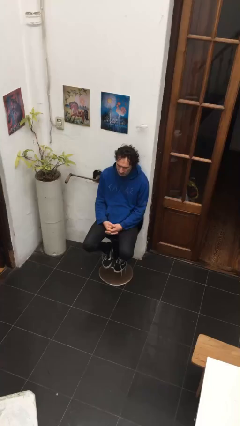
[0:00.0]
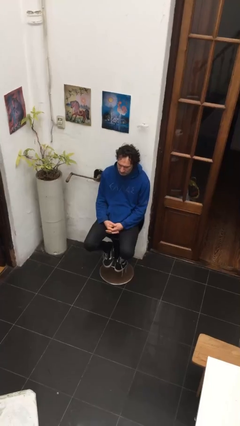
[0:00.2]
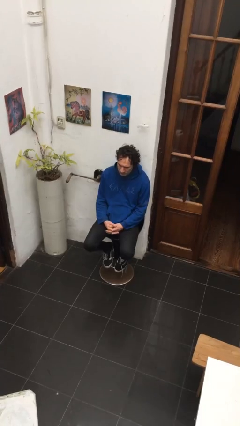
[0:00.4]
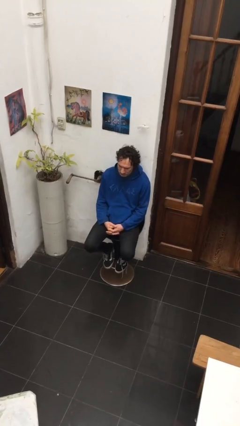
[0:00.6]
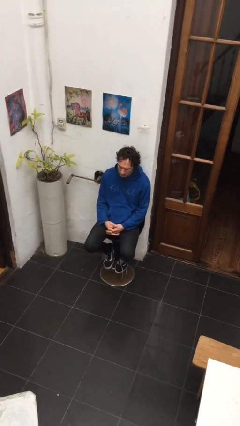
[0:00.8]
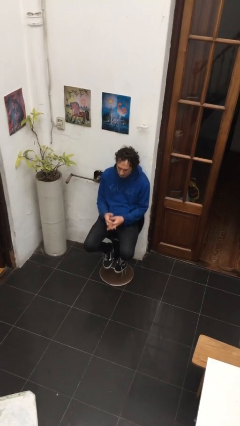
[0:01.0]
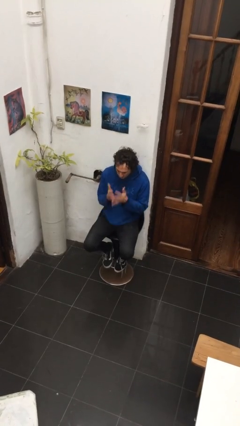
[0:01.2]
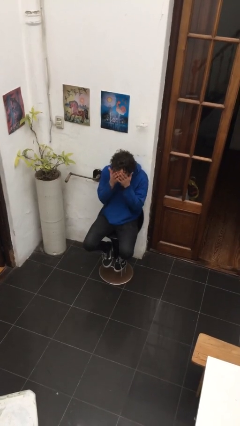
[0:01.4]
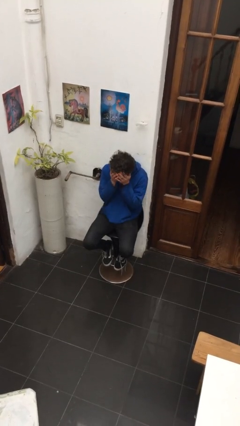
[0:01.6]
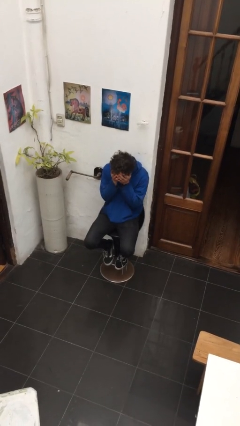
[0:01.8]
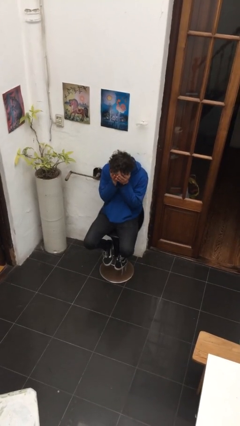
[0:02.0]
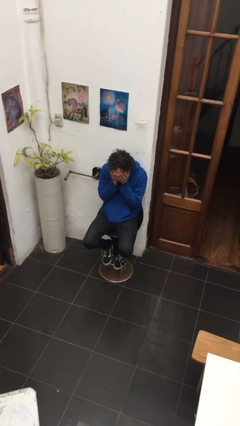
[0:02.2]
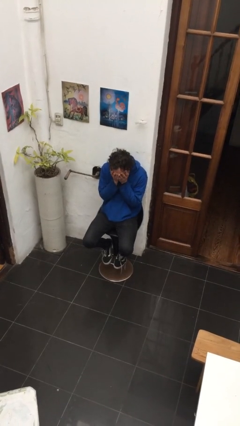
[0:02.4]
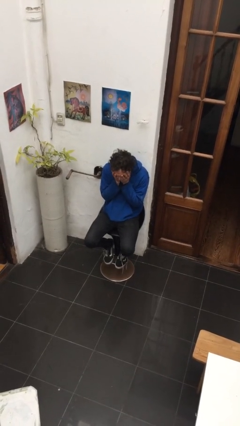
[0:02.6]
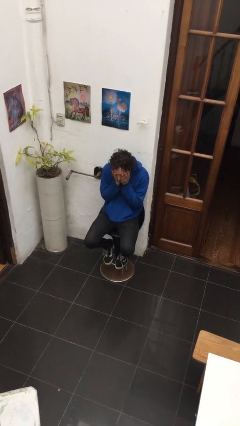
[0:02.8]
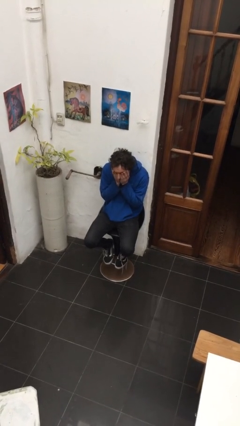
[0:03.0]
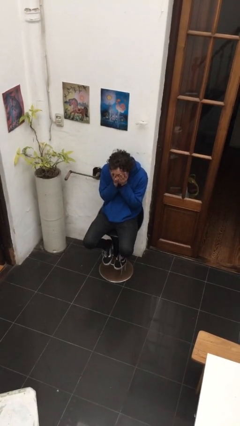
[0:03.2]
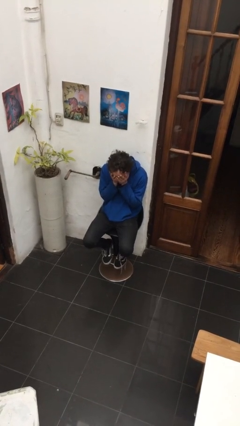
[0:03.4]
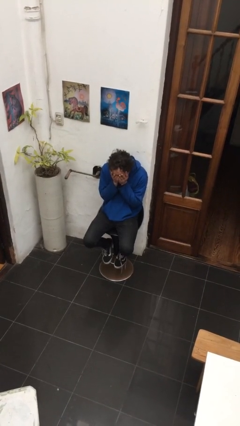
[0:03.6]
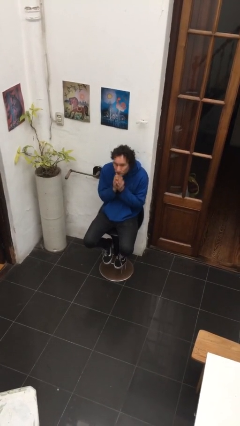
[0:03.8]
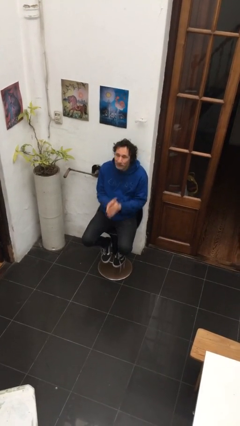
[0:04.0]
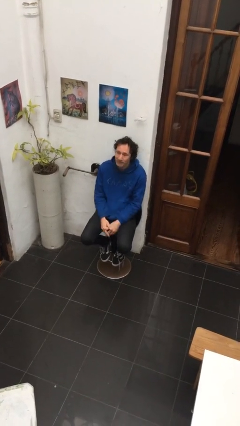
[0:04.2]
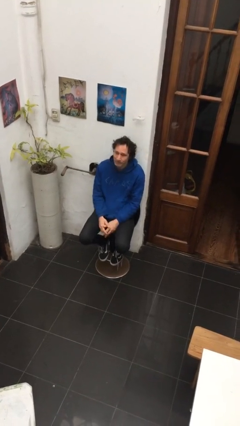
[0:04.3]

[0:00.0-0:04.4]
person covers face with hands

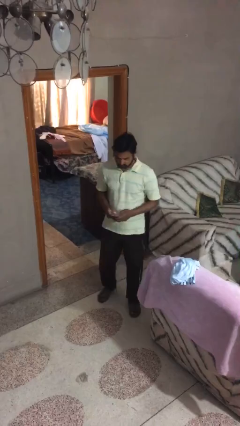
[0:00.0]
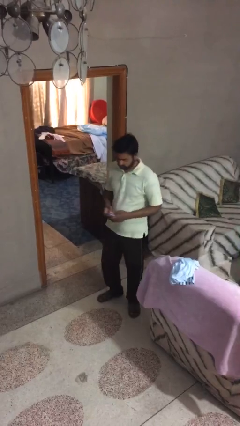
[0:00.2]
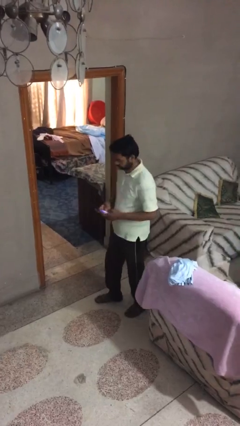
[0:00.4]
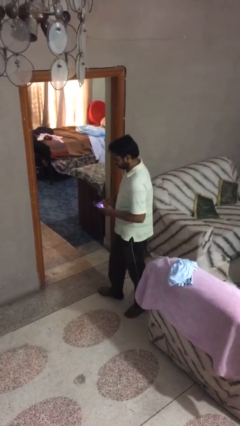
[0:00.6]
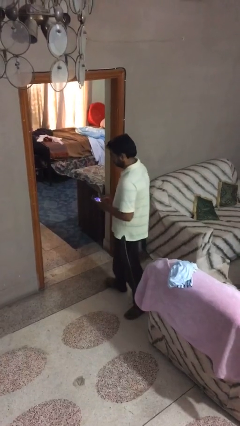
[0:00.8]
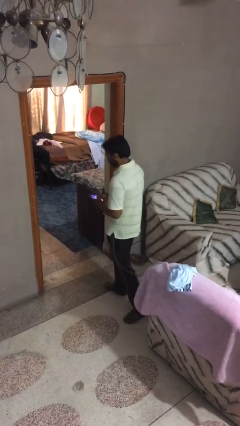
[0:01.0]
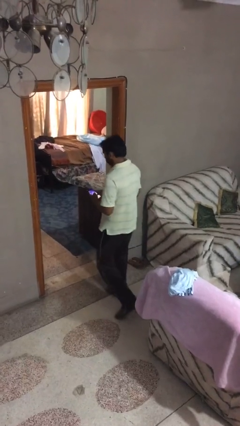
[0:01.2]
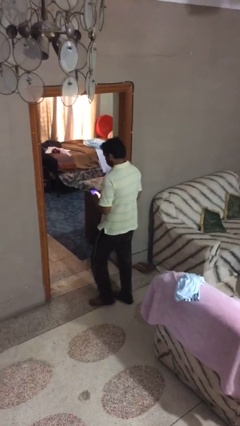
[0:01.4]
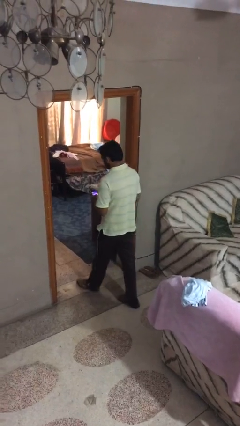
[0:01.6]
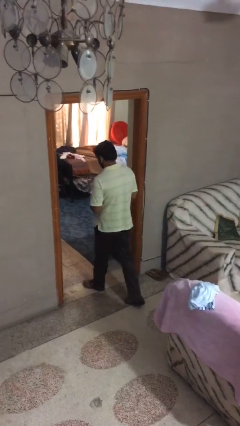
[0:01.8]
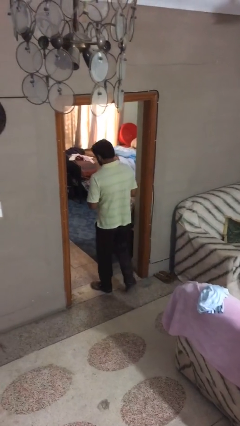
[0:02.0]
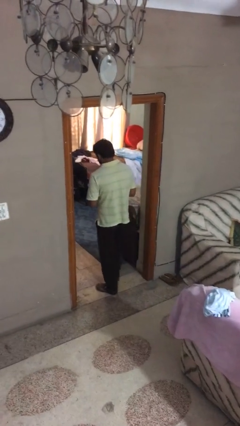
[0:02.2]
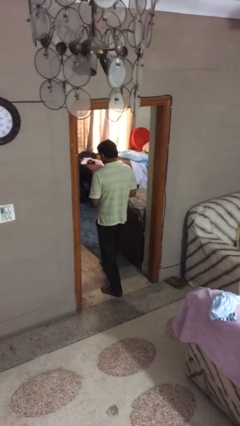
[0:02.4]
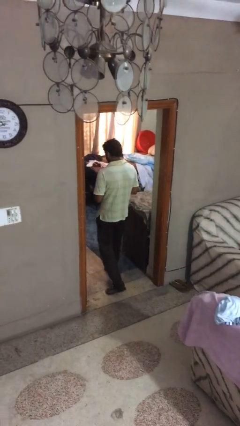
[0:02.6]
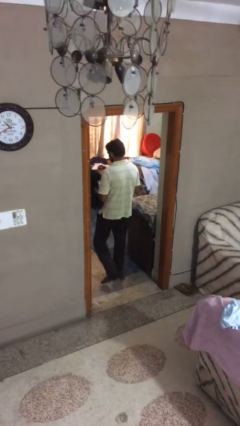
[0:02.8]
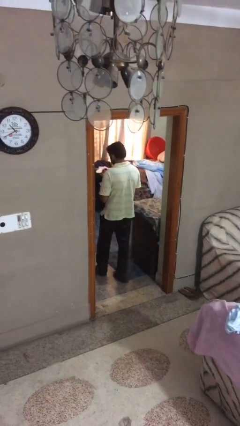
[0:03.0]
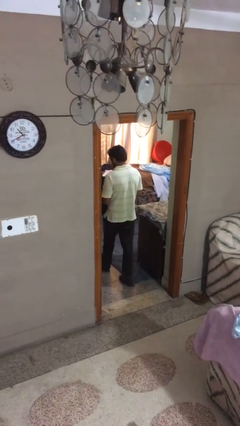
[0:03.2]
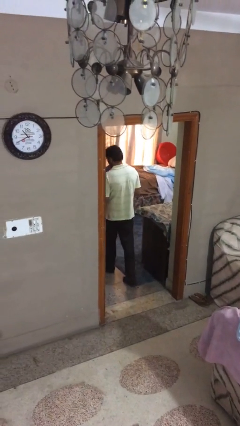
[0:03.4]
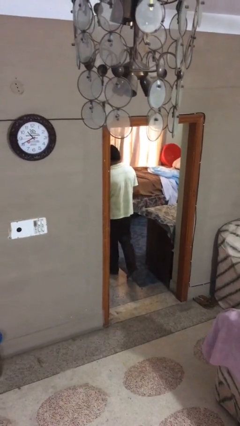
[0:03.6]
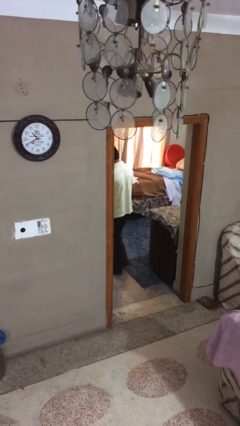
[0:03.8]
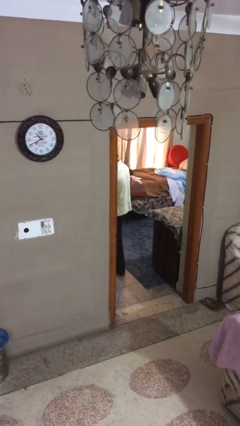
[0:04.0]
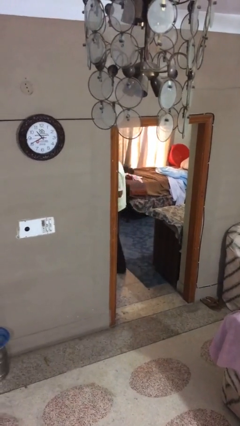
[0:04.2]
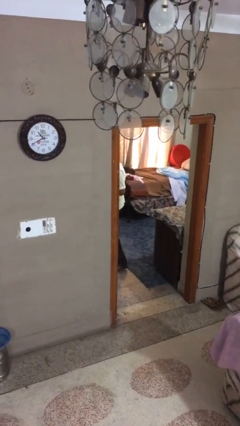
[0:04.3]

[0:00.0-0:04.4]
person exits scene through structure

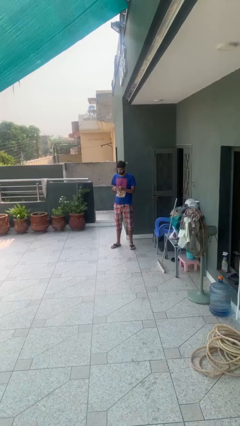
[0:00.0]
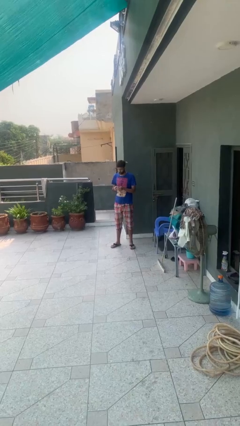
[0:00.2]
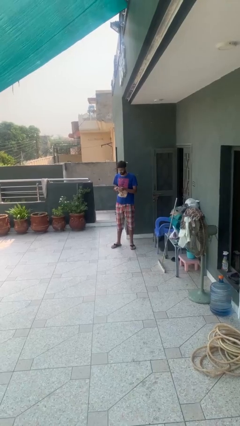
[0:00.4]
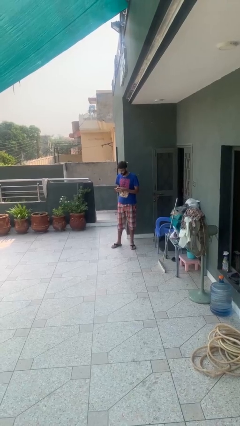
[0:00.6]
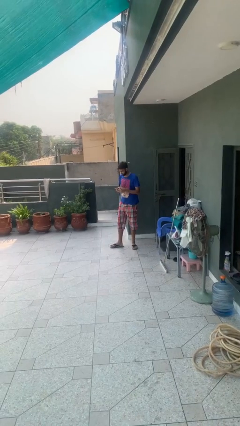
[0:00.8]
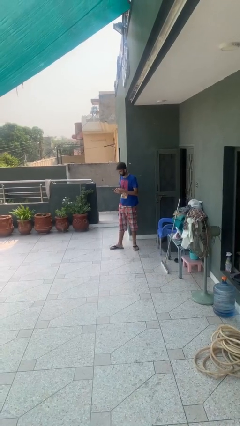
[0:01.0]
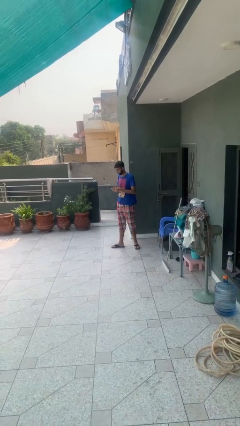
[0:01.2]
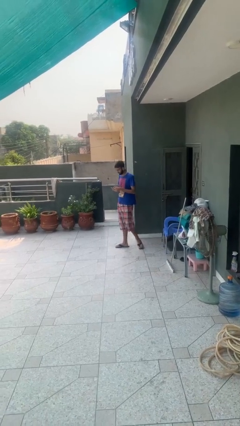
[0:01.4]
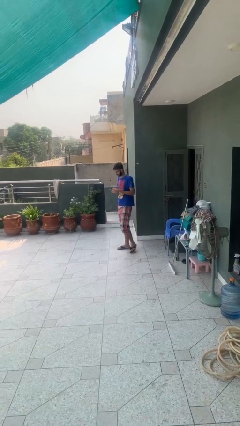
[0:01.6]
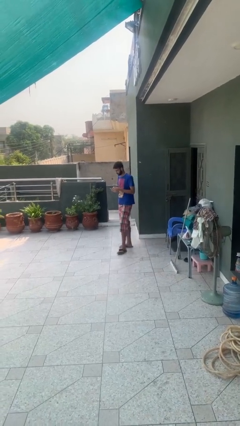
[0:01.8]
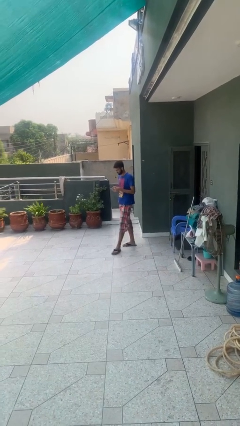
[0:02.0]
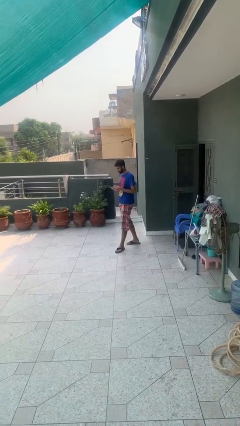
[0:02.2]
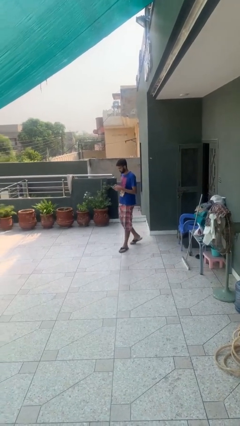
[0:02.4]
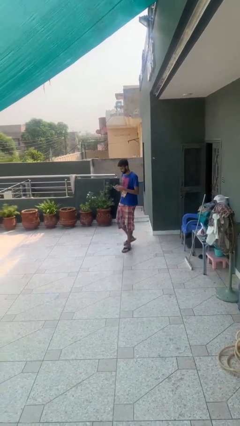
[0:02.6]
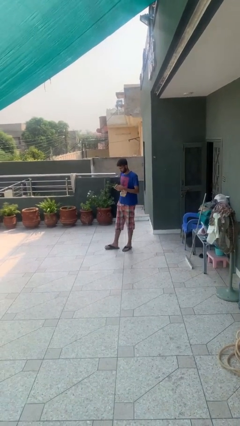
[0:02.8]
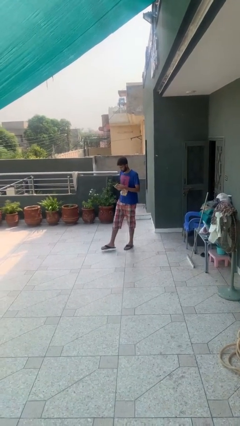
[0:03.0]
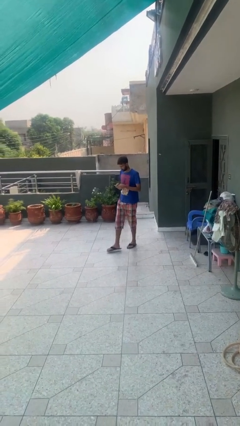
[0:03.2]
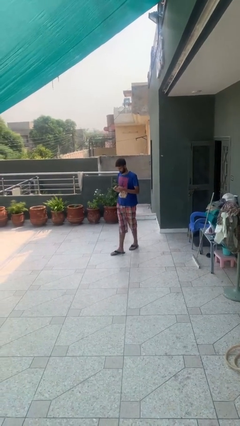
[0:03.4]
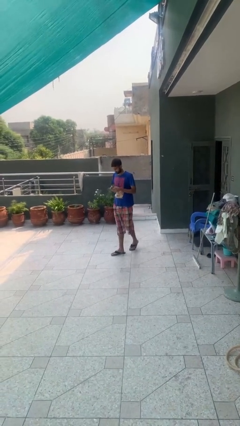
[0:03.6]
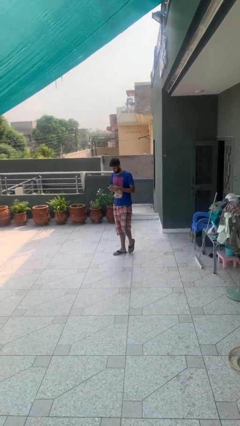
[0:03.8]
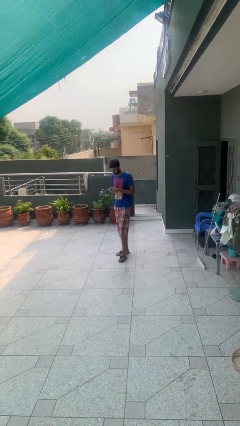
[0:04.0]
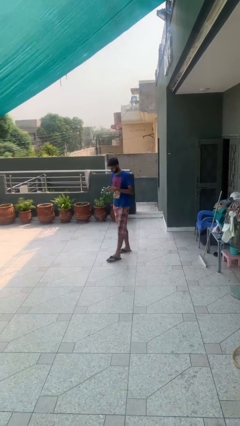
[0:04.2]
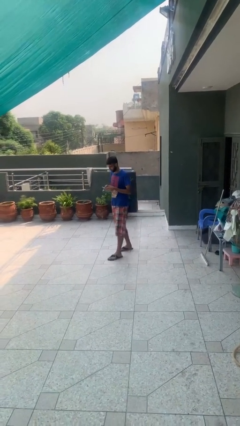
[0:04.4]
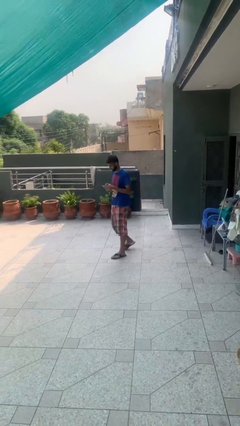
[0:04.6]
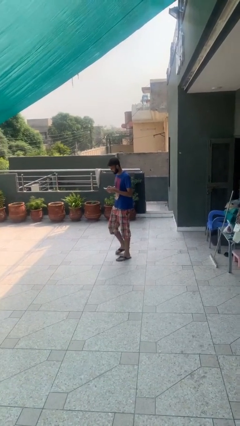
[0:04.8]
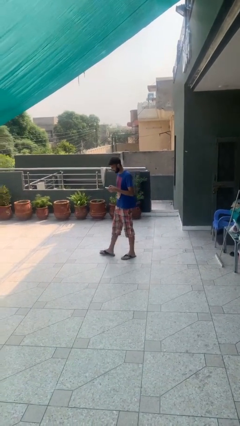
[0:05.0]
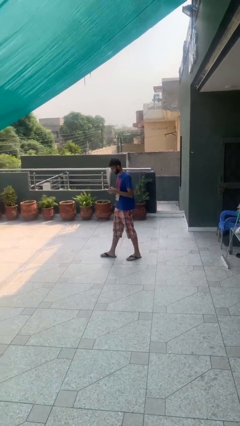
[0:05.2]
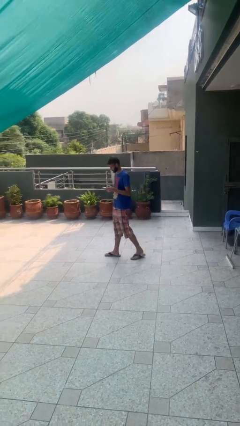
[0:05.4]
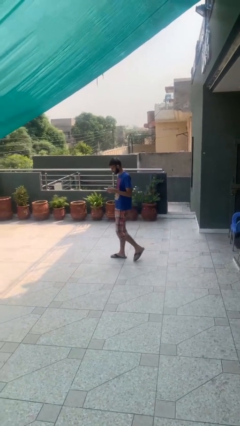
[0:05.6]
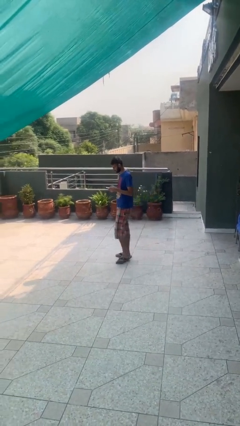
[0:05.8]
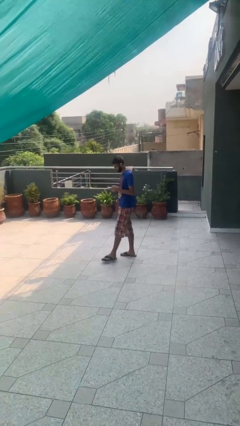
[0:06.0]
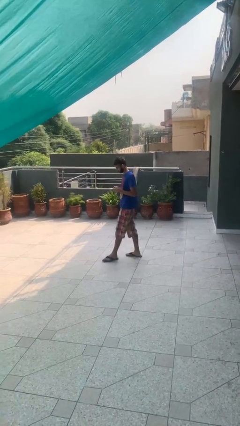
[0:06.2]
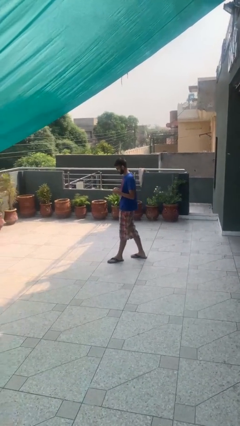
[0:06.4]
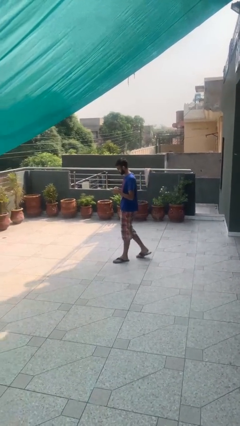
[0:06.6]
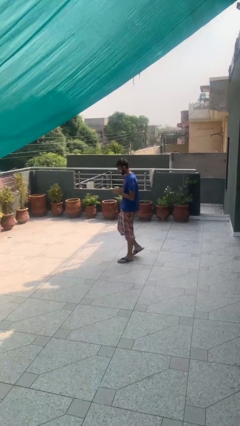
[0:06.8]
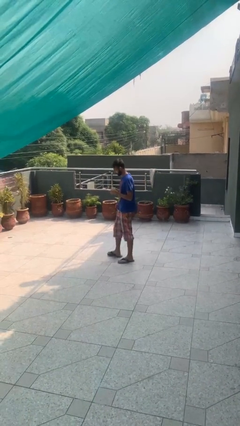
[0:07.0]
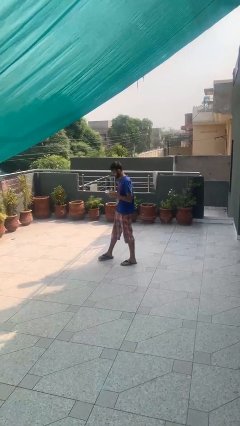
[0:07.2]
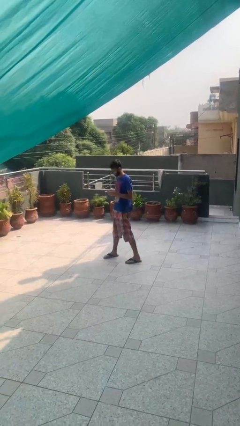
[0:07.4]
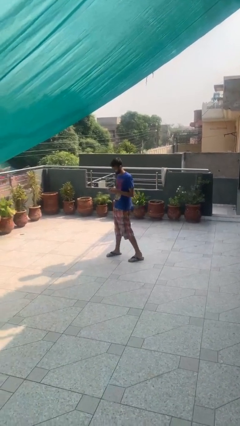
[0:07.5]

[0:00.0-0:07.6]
person texts on phone

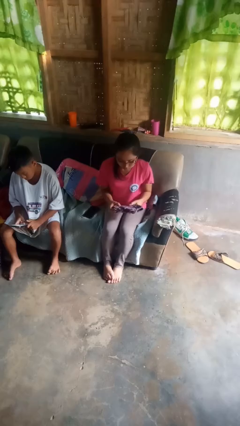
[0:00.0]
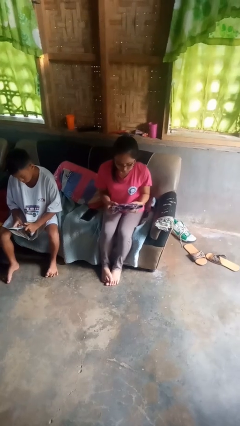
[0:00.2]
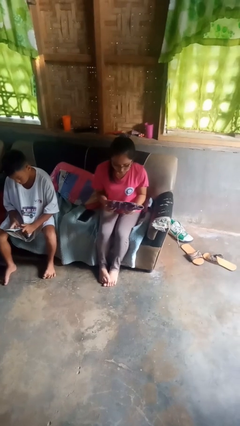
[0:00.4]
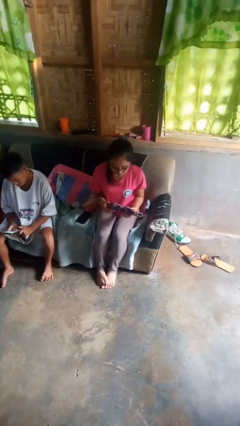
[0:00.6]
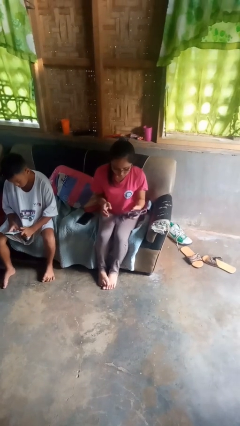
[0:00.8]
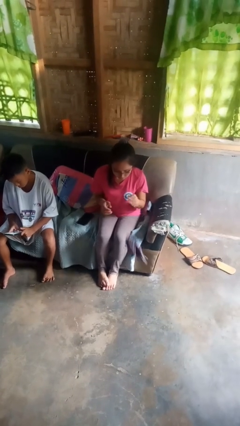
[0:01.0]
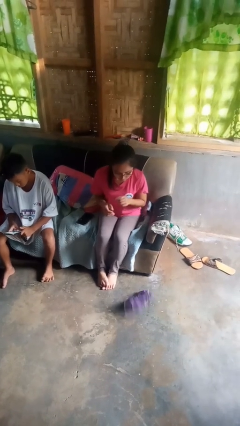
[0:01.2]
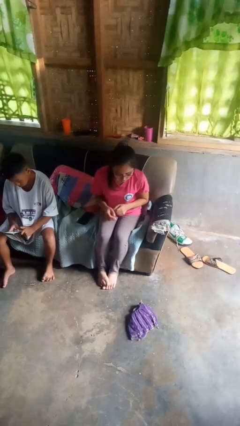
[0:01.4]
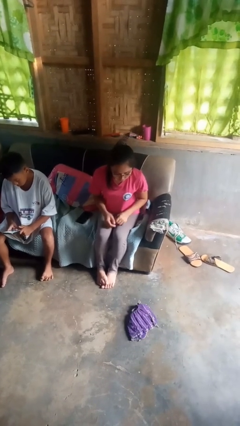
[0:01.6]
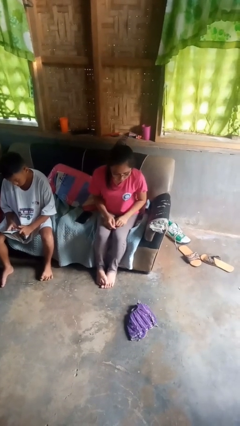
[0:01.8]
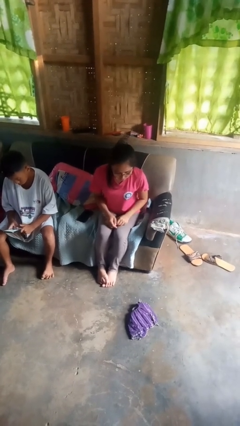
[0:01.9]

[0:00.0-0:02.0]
person drops object
